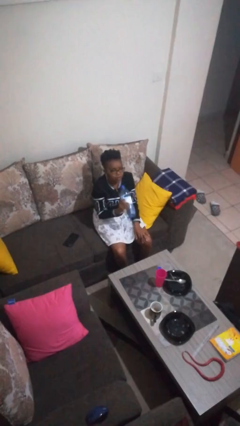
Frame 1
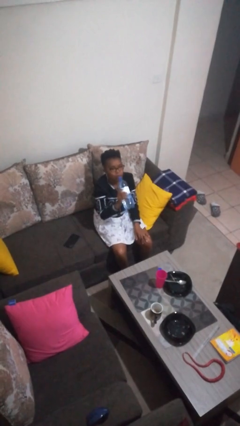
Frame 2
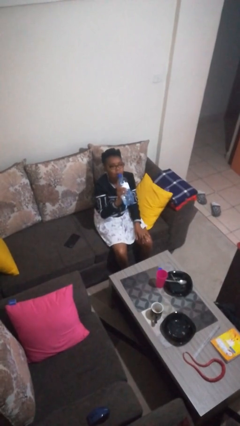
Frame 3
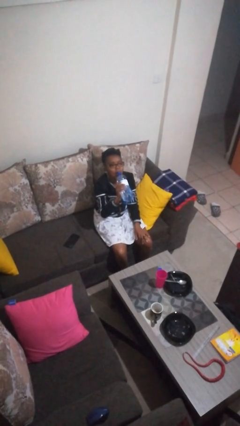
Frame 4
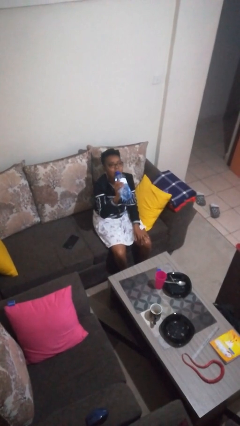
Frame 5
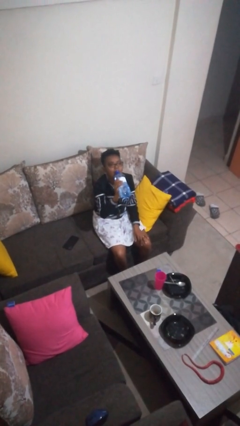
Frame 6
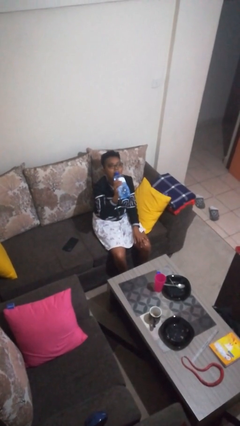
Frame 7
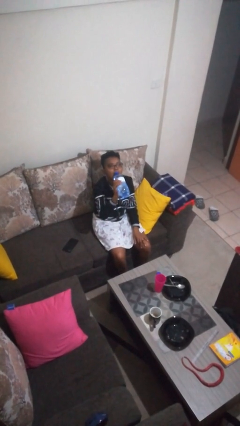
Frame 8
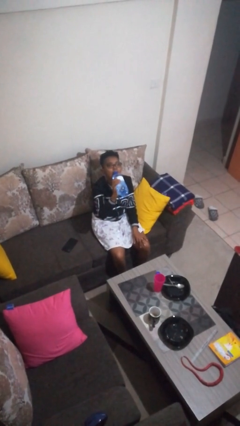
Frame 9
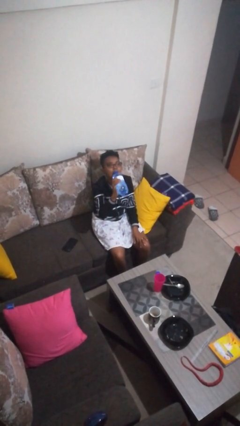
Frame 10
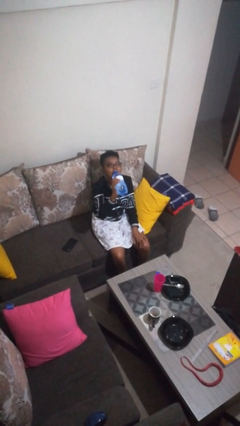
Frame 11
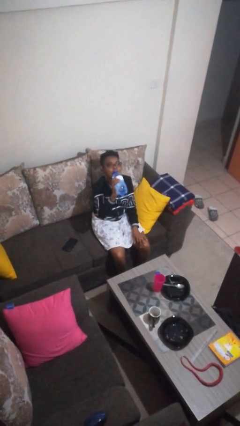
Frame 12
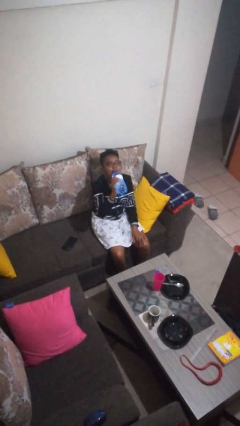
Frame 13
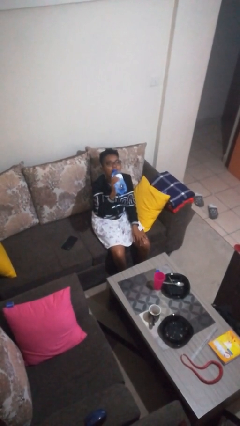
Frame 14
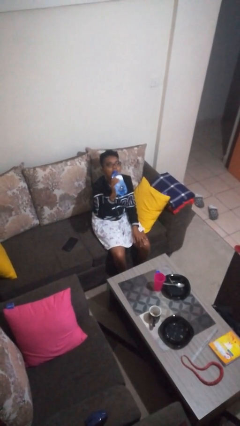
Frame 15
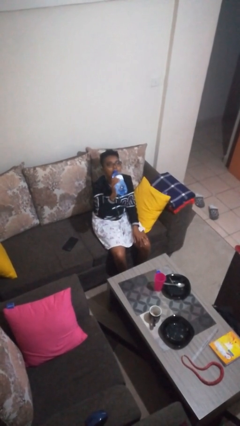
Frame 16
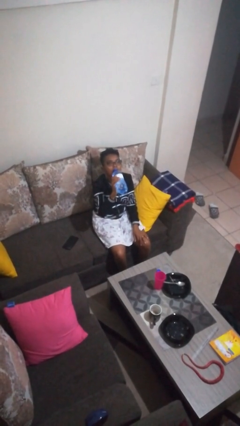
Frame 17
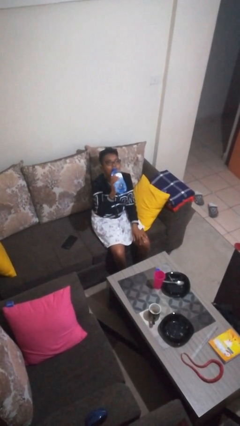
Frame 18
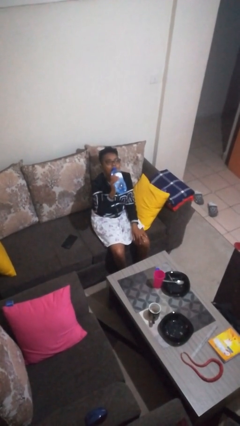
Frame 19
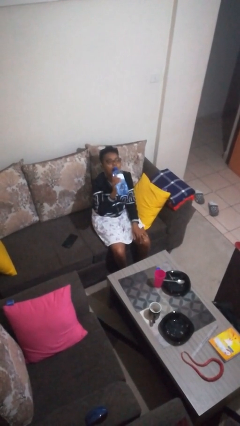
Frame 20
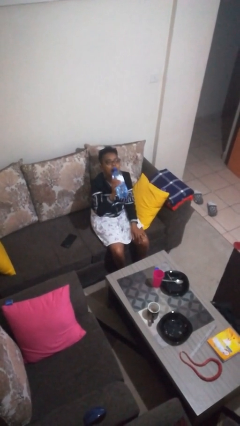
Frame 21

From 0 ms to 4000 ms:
person drinks from bottle

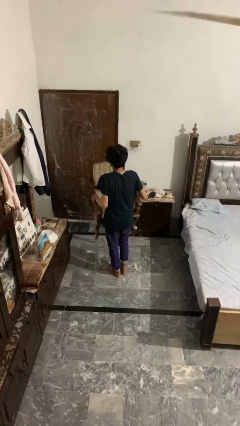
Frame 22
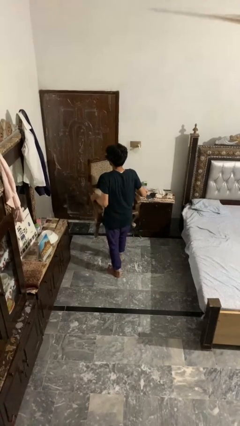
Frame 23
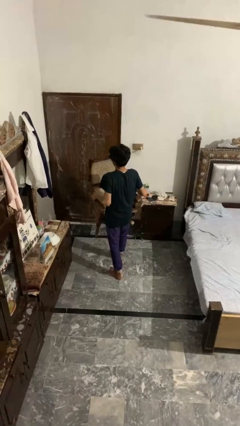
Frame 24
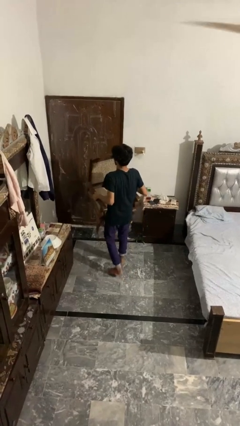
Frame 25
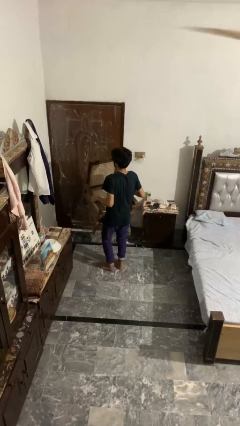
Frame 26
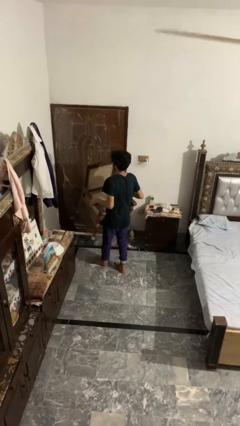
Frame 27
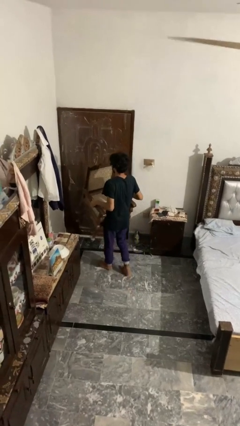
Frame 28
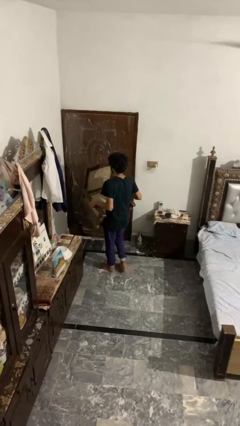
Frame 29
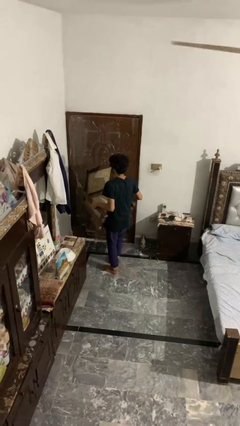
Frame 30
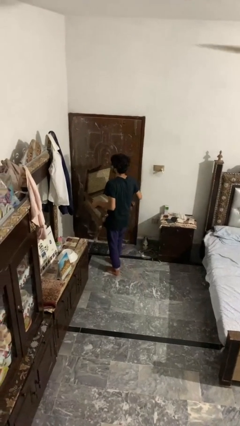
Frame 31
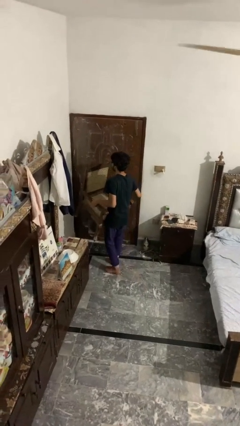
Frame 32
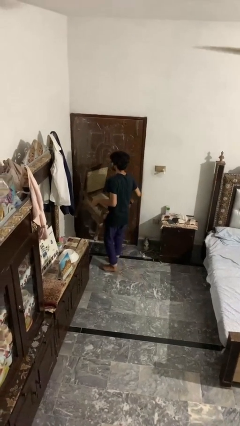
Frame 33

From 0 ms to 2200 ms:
person carries furniture

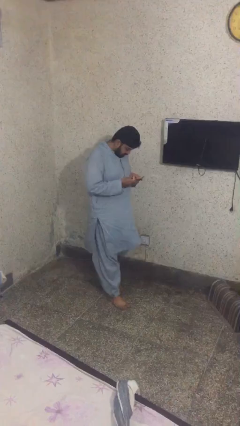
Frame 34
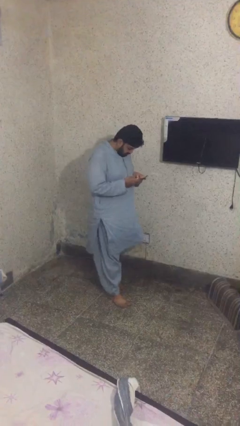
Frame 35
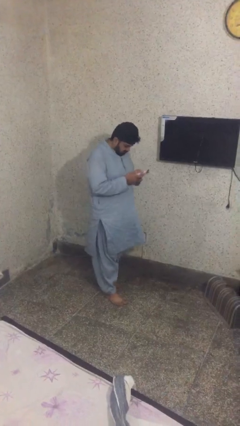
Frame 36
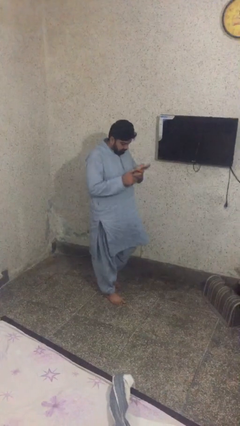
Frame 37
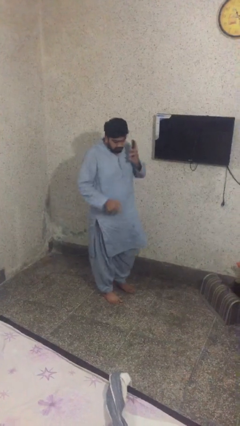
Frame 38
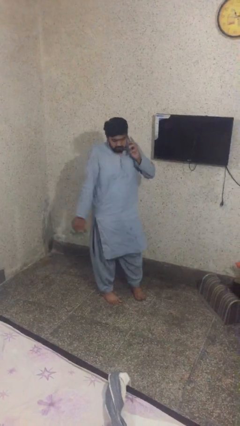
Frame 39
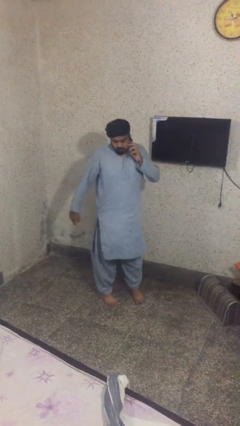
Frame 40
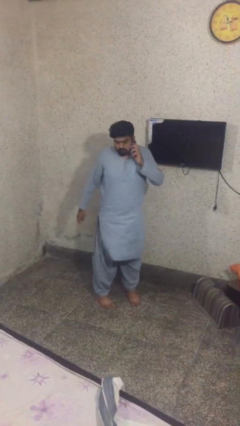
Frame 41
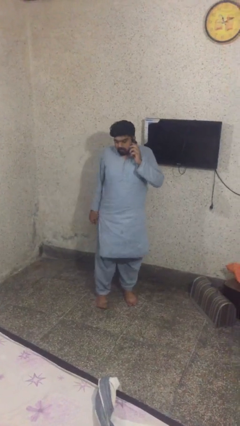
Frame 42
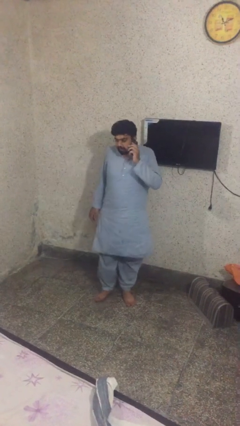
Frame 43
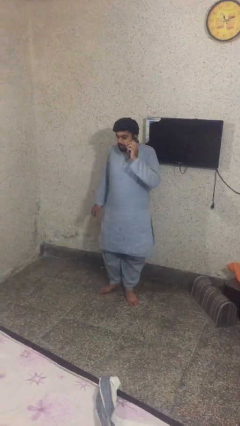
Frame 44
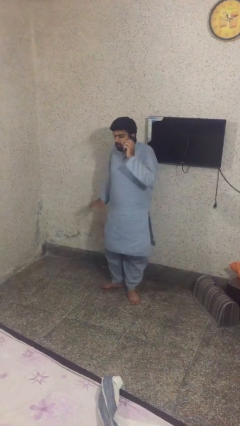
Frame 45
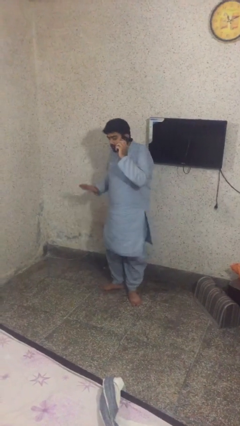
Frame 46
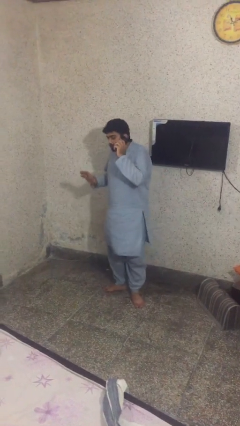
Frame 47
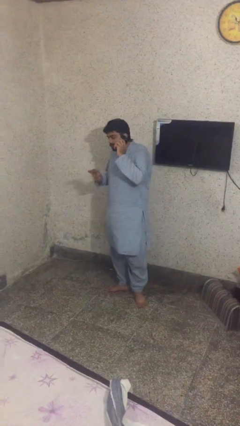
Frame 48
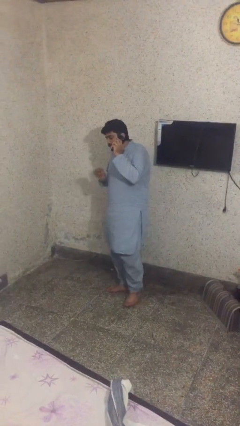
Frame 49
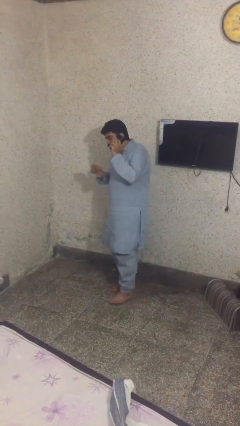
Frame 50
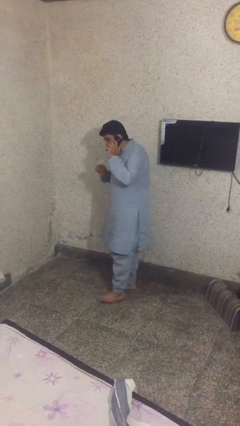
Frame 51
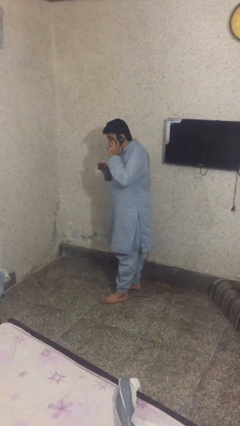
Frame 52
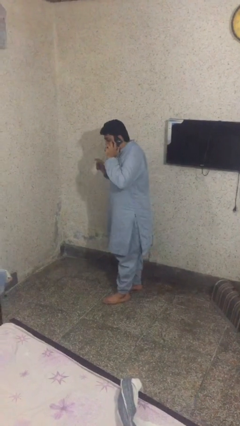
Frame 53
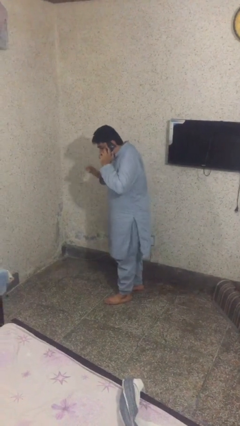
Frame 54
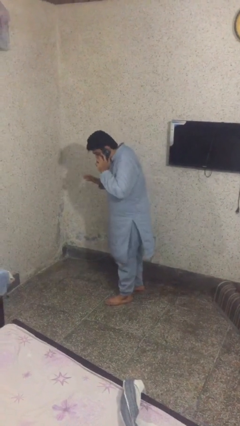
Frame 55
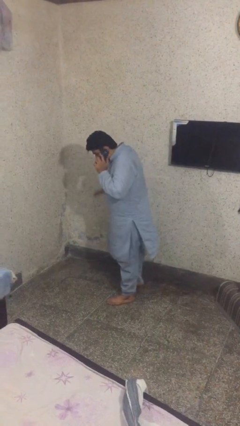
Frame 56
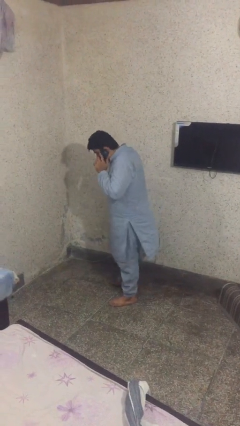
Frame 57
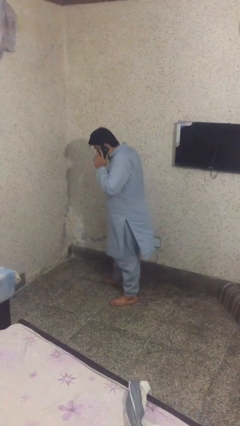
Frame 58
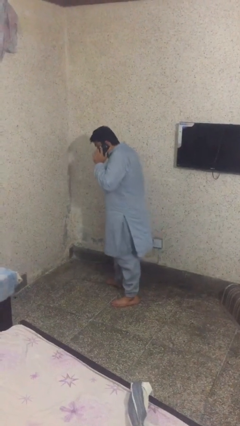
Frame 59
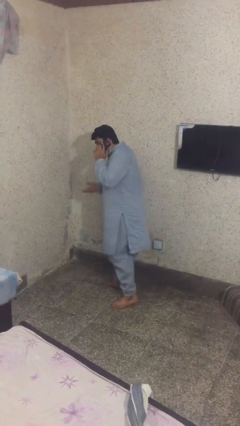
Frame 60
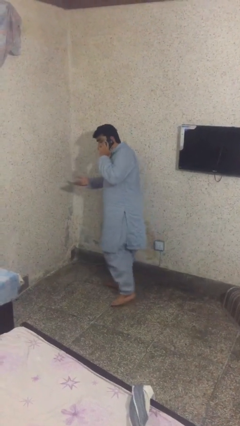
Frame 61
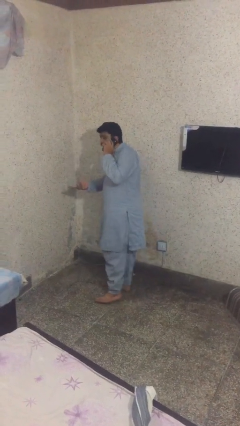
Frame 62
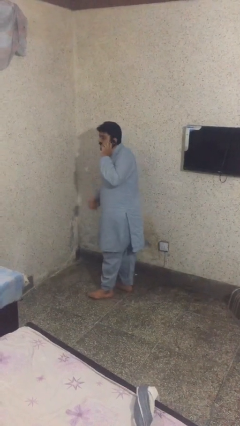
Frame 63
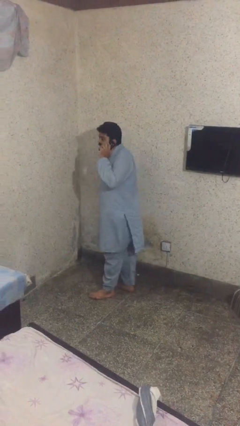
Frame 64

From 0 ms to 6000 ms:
person talks on phone

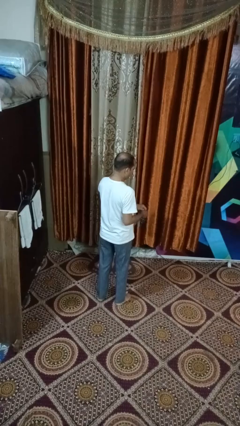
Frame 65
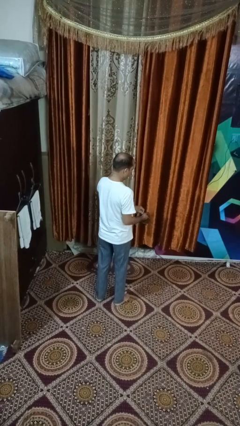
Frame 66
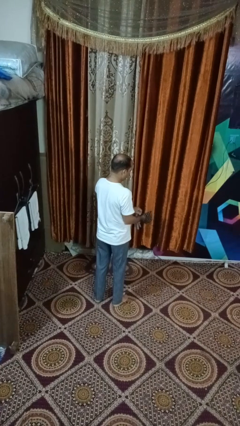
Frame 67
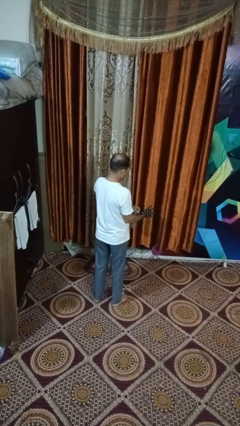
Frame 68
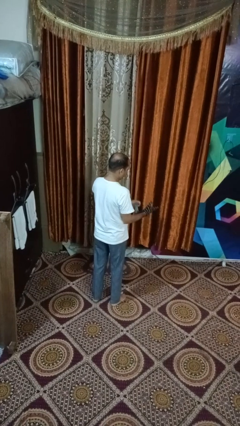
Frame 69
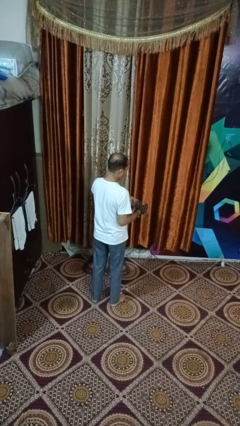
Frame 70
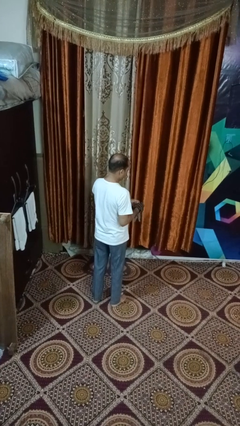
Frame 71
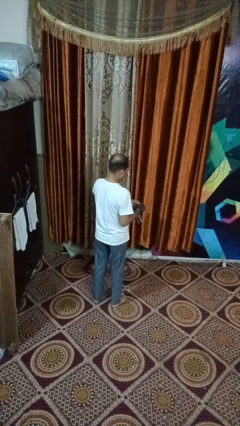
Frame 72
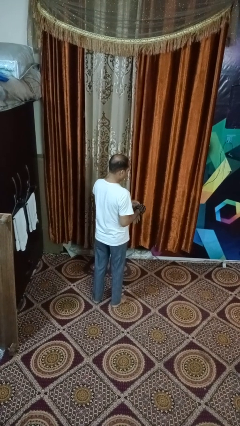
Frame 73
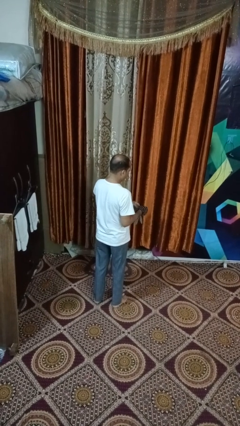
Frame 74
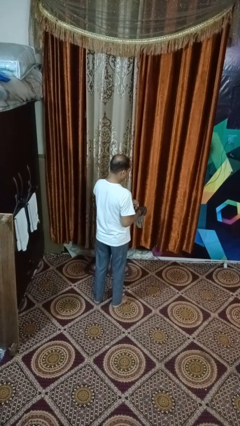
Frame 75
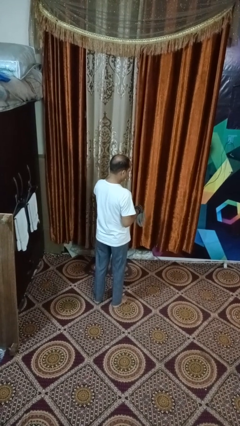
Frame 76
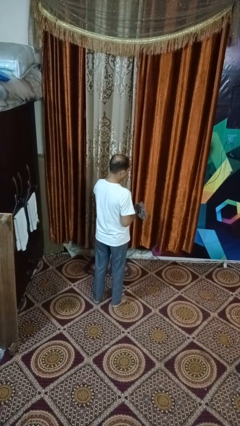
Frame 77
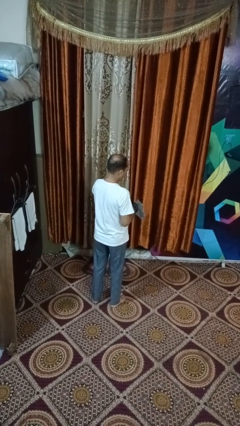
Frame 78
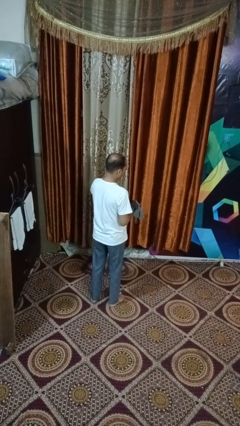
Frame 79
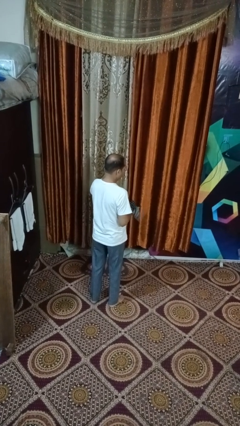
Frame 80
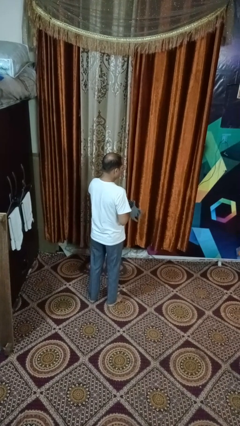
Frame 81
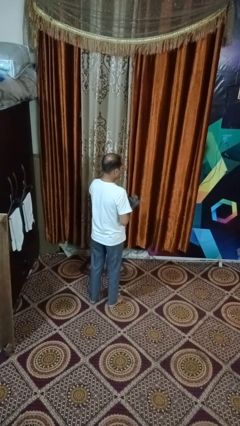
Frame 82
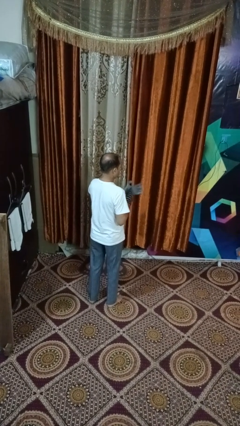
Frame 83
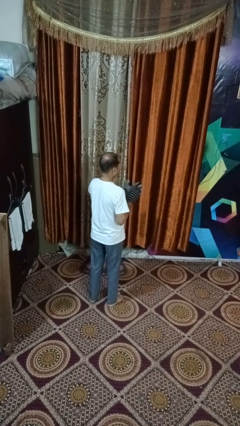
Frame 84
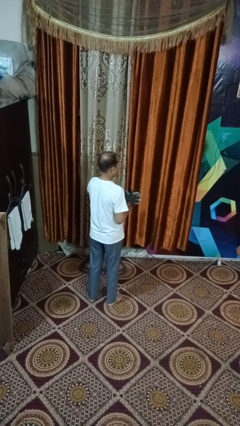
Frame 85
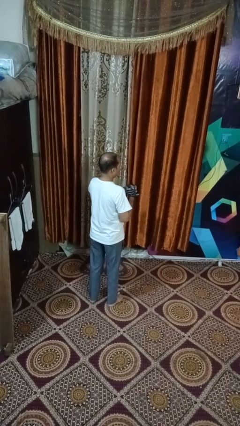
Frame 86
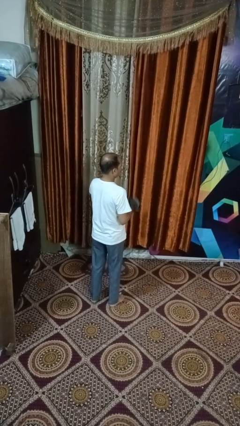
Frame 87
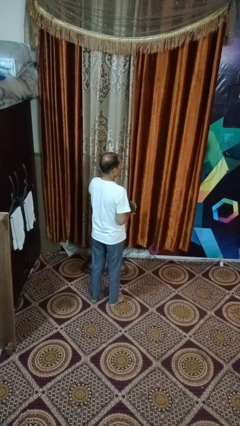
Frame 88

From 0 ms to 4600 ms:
person puts on gloves

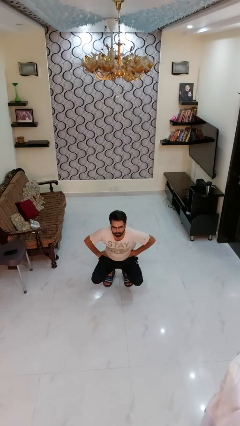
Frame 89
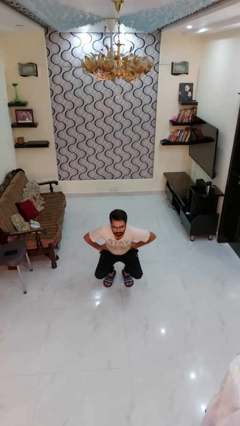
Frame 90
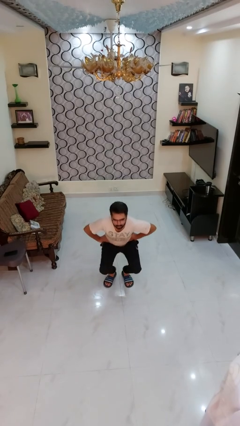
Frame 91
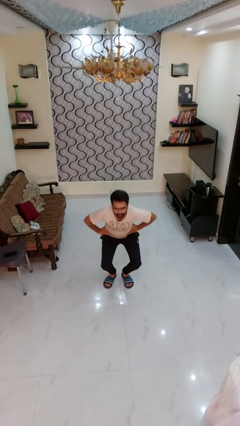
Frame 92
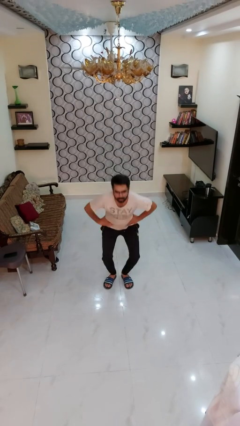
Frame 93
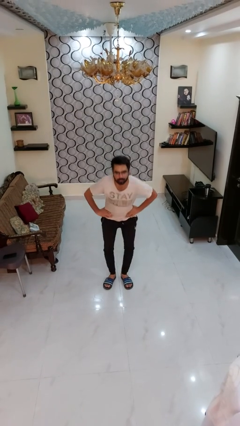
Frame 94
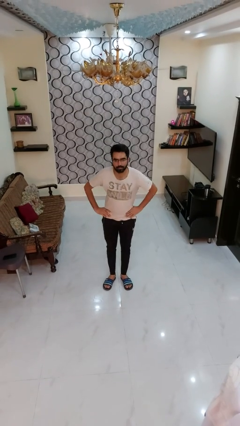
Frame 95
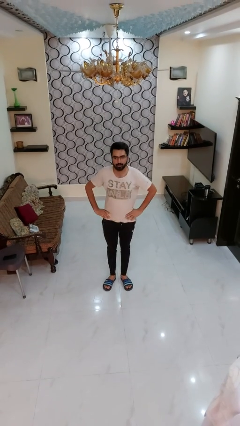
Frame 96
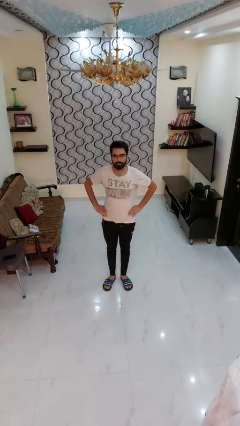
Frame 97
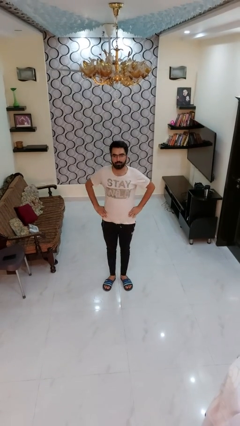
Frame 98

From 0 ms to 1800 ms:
person stands up
